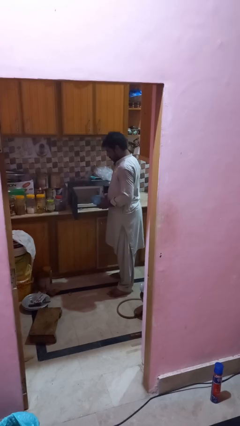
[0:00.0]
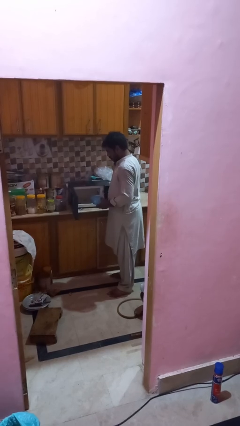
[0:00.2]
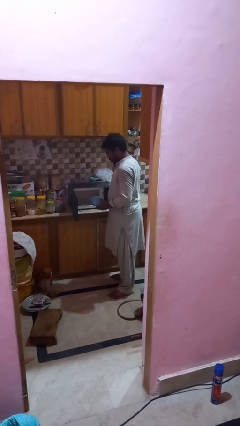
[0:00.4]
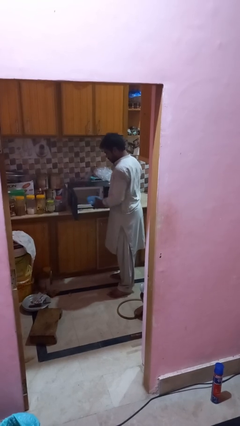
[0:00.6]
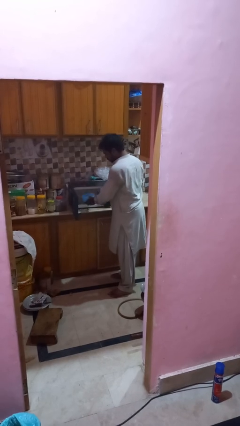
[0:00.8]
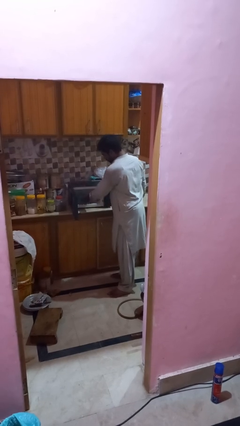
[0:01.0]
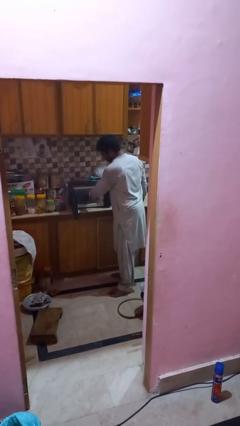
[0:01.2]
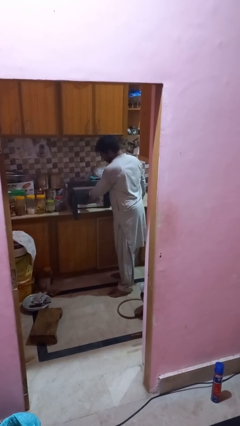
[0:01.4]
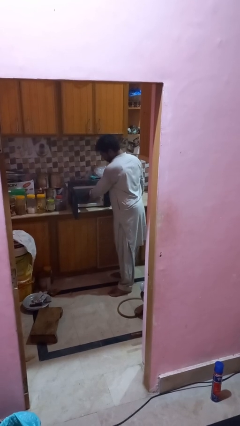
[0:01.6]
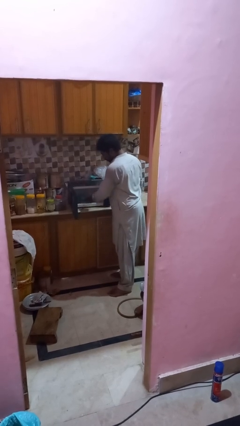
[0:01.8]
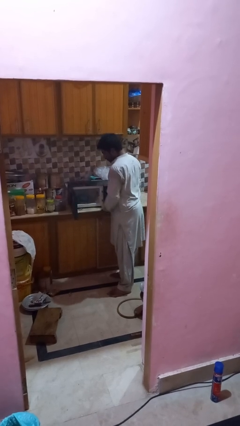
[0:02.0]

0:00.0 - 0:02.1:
person puts object into microwave

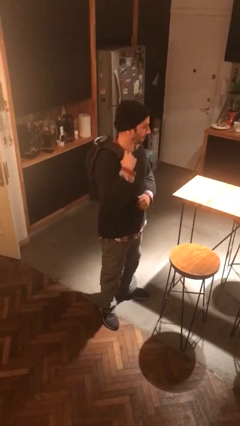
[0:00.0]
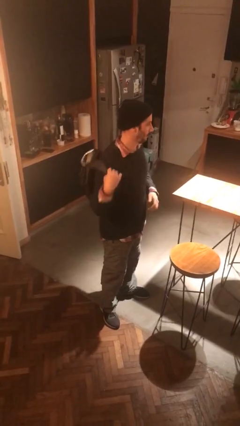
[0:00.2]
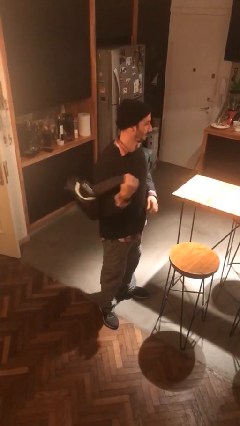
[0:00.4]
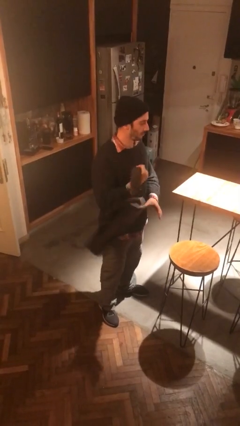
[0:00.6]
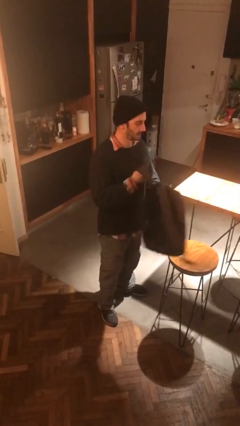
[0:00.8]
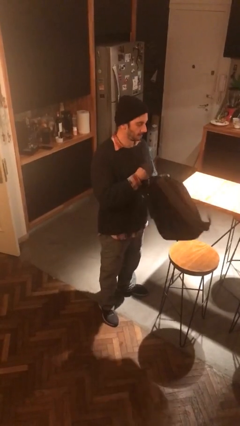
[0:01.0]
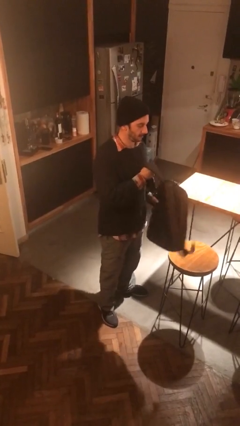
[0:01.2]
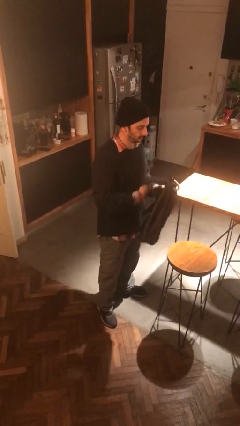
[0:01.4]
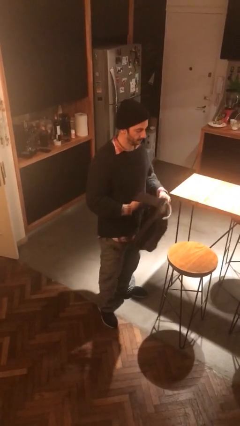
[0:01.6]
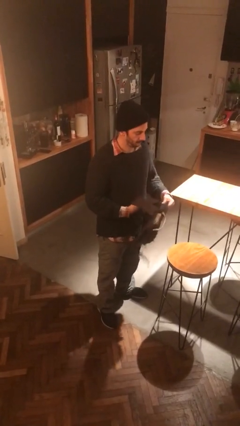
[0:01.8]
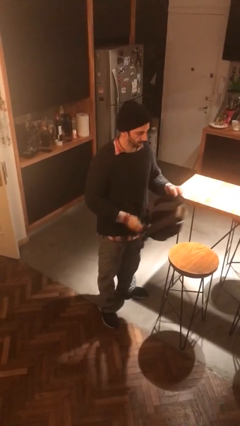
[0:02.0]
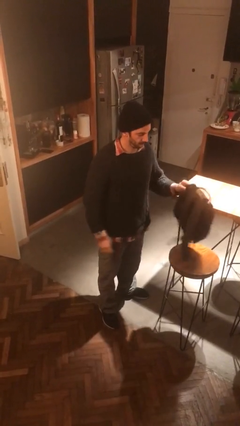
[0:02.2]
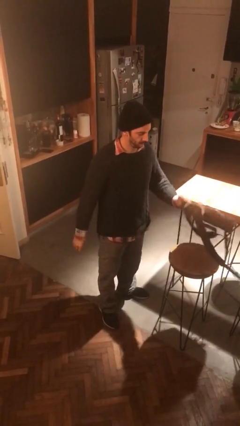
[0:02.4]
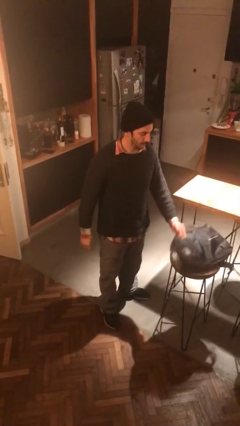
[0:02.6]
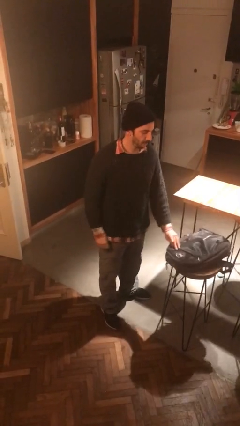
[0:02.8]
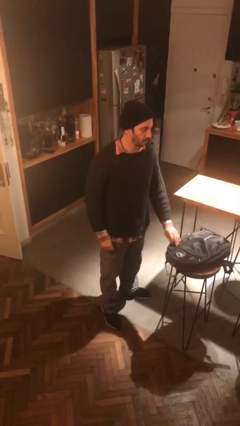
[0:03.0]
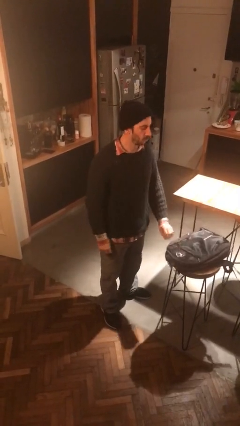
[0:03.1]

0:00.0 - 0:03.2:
person takes off backpack

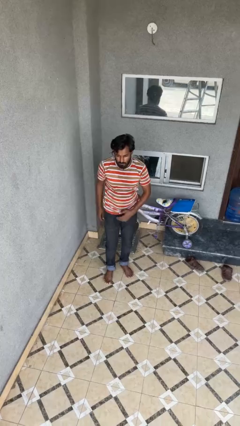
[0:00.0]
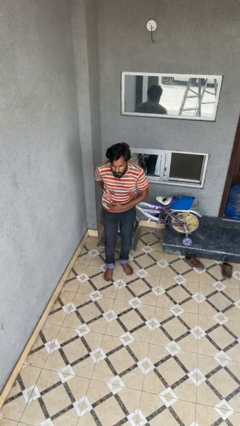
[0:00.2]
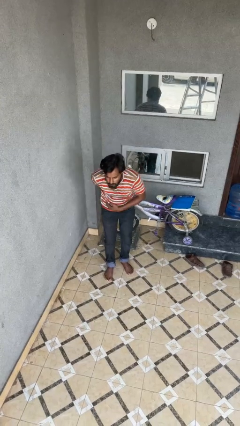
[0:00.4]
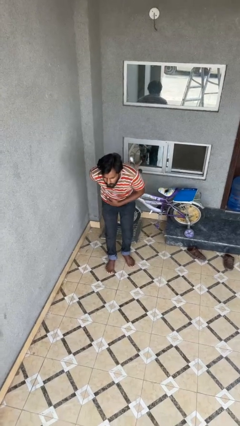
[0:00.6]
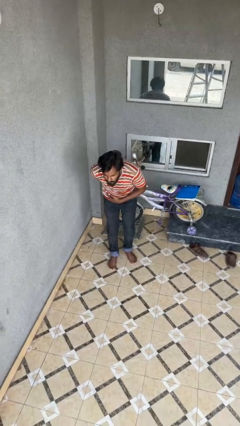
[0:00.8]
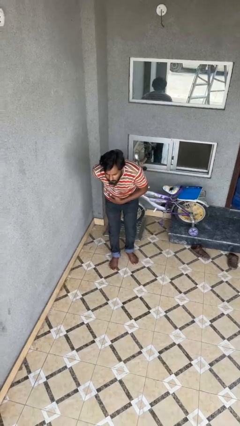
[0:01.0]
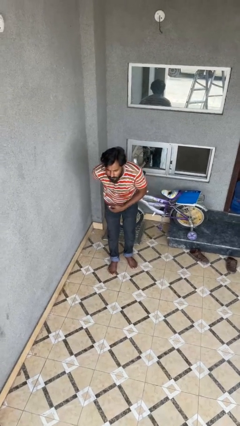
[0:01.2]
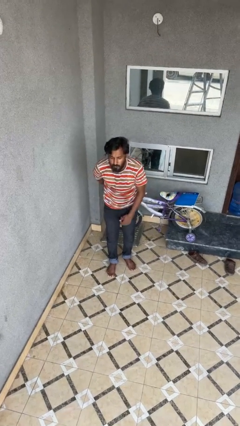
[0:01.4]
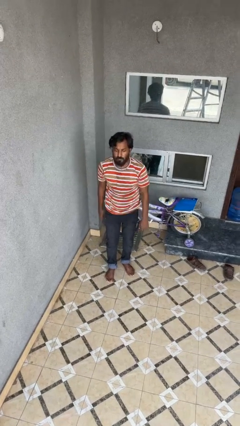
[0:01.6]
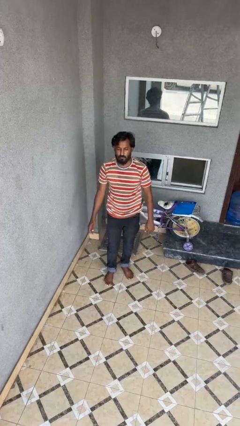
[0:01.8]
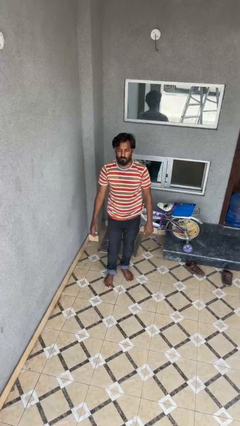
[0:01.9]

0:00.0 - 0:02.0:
person bows

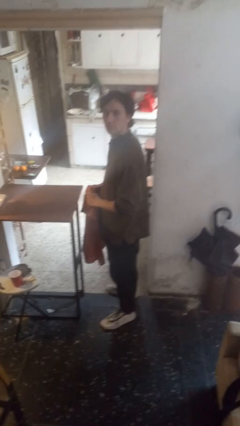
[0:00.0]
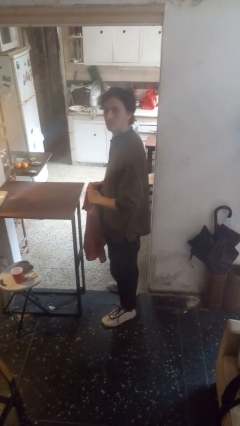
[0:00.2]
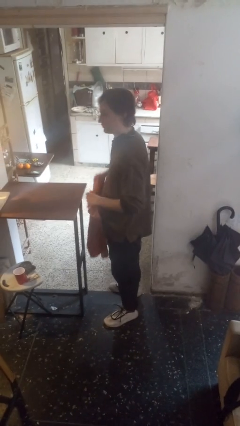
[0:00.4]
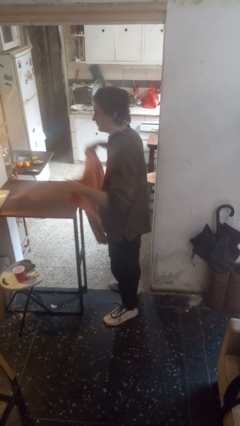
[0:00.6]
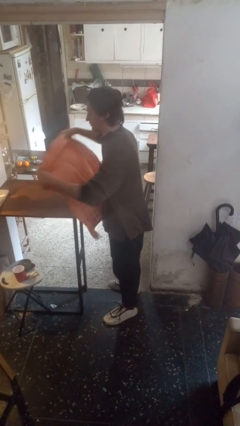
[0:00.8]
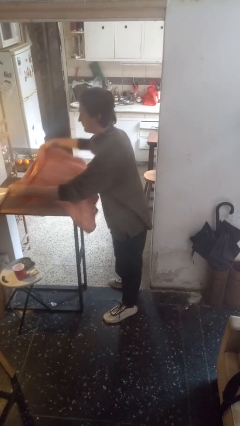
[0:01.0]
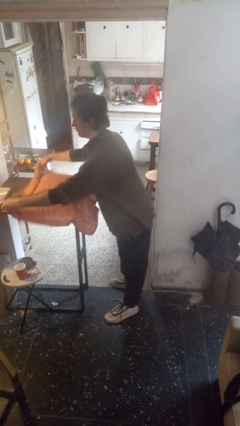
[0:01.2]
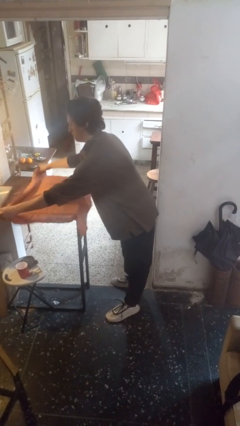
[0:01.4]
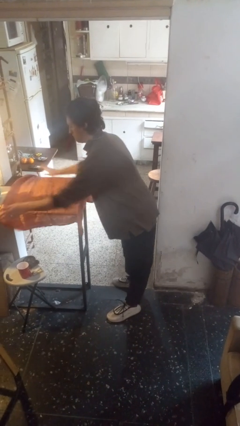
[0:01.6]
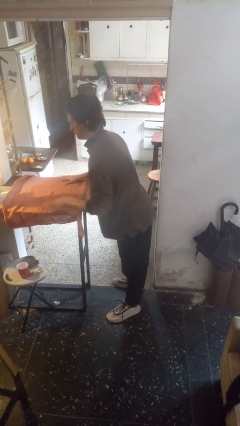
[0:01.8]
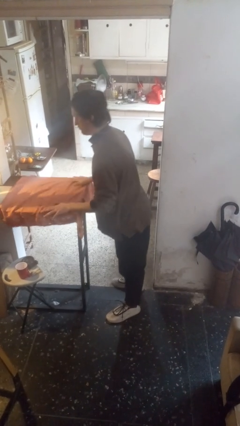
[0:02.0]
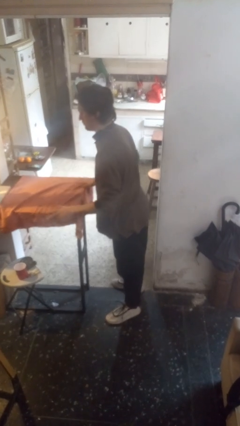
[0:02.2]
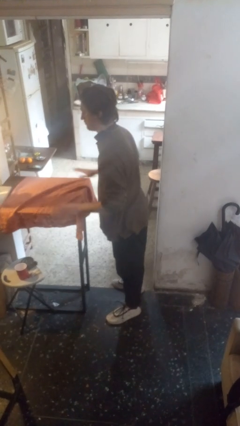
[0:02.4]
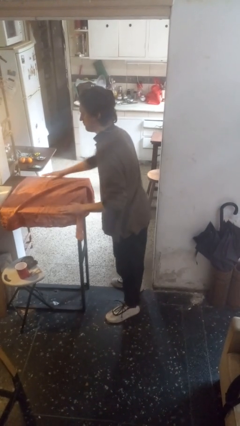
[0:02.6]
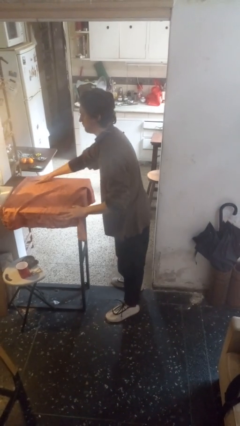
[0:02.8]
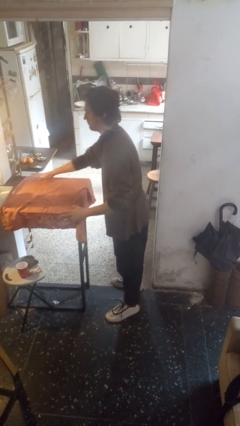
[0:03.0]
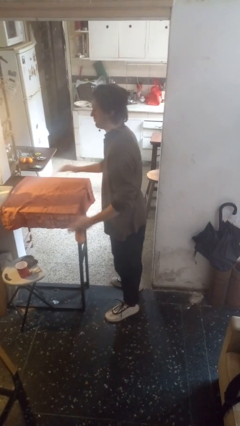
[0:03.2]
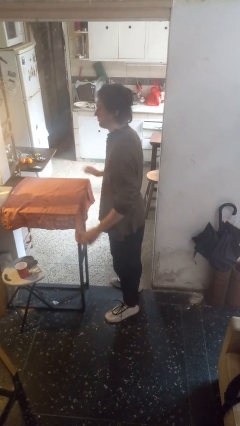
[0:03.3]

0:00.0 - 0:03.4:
person spreads tablecloth

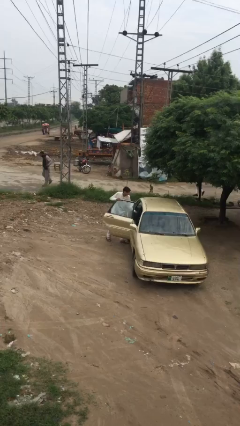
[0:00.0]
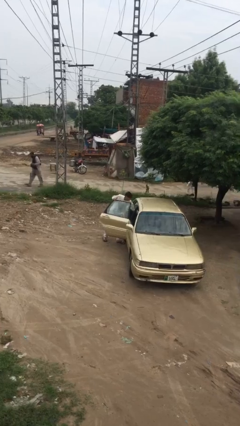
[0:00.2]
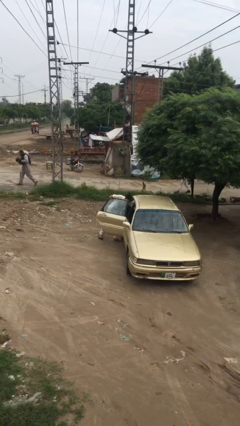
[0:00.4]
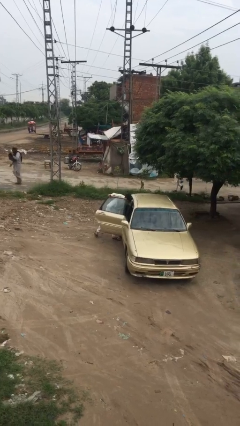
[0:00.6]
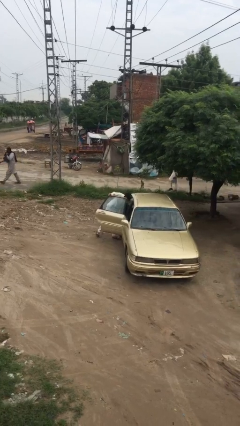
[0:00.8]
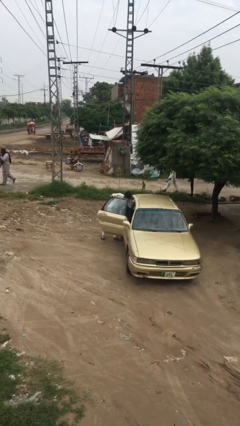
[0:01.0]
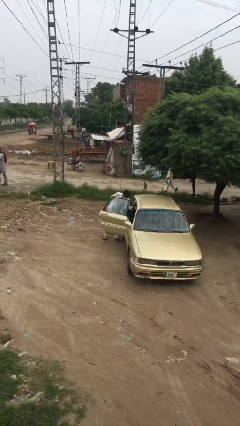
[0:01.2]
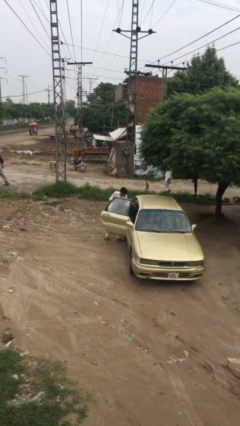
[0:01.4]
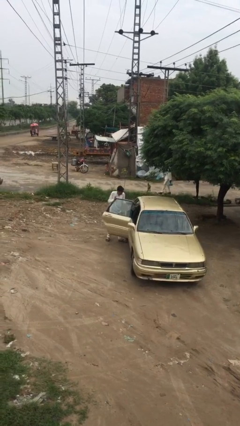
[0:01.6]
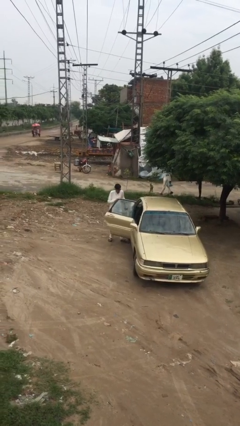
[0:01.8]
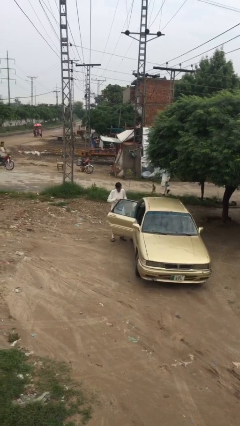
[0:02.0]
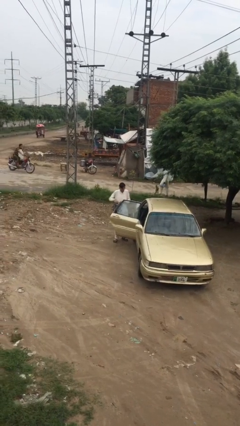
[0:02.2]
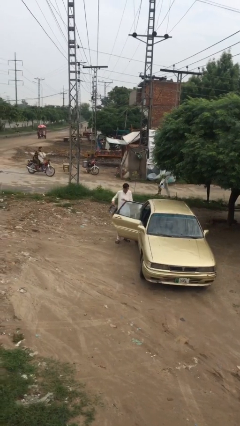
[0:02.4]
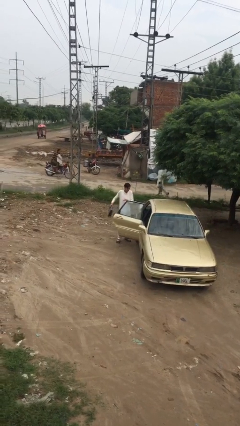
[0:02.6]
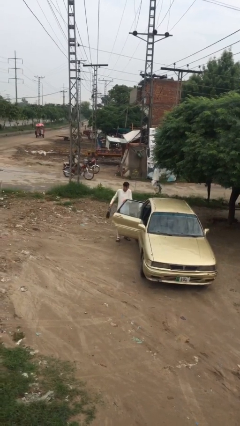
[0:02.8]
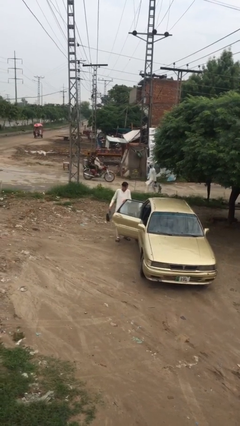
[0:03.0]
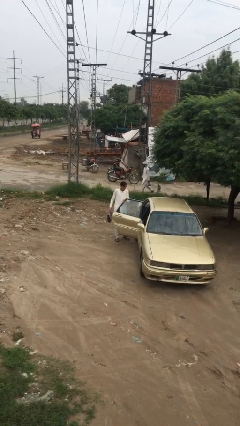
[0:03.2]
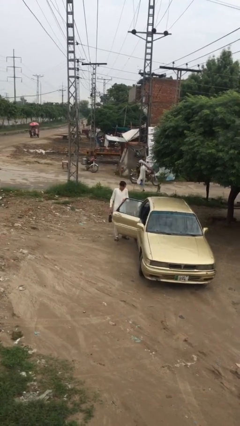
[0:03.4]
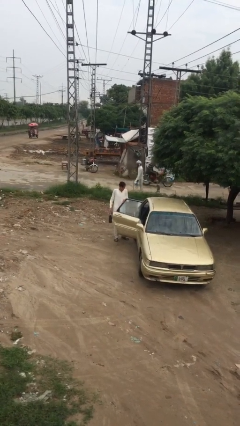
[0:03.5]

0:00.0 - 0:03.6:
person unloads car

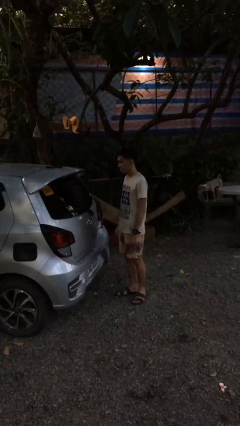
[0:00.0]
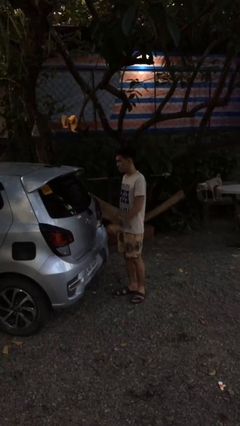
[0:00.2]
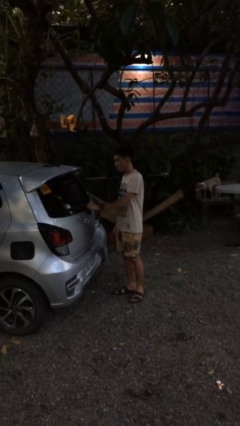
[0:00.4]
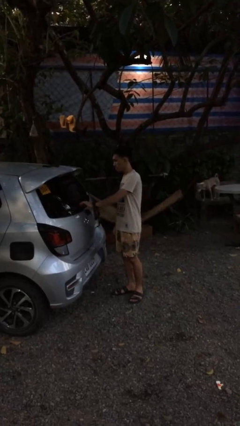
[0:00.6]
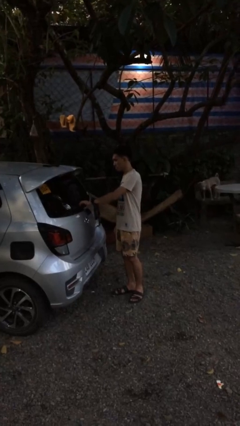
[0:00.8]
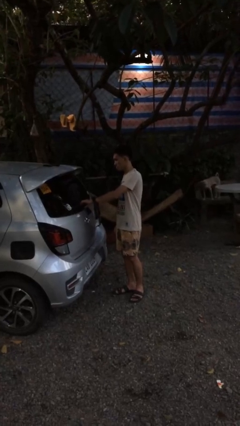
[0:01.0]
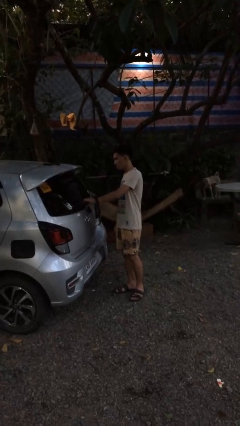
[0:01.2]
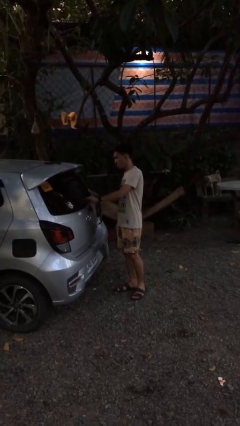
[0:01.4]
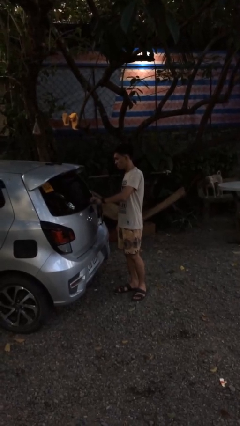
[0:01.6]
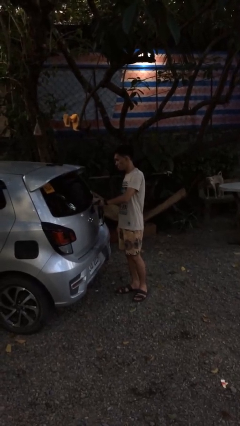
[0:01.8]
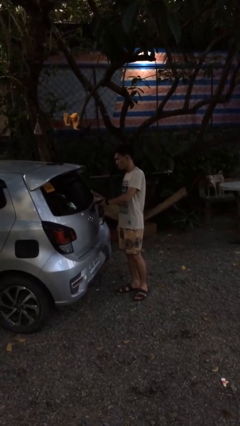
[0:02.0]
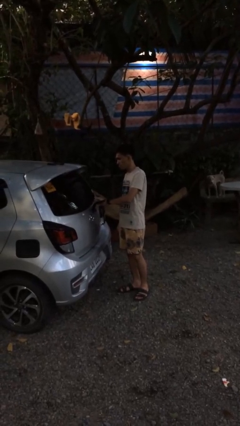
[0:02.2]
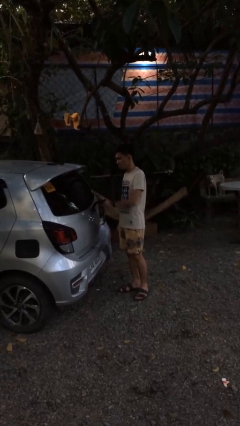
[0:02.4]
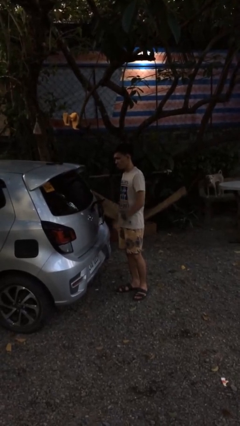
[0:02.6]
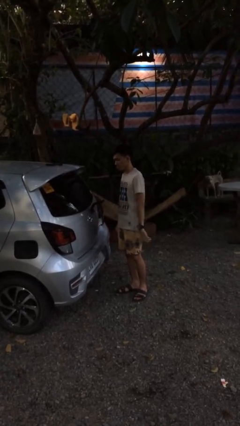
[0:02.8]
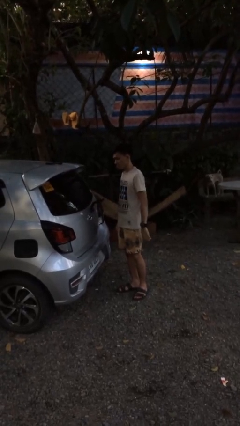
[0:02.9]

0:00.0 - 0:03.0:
person flips up car wipers

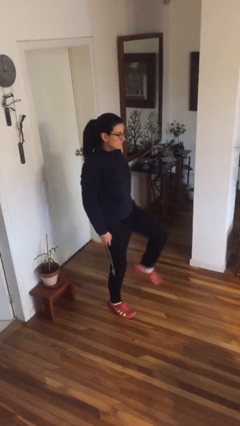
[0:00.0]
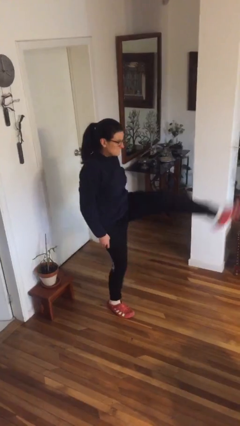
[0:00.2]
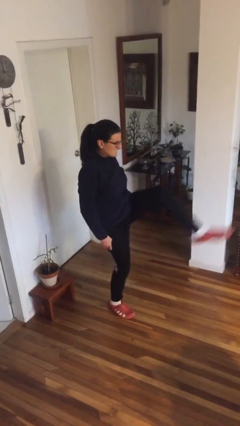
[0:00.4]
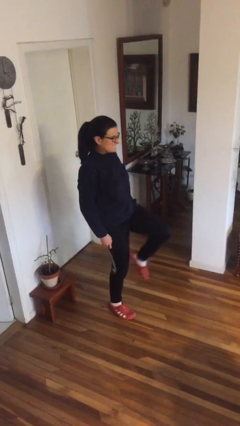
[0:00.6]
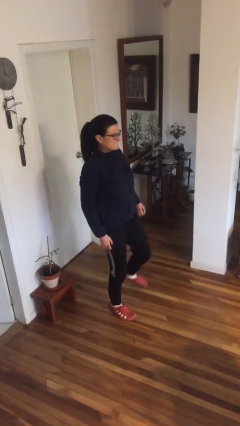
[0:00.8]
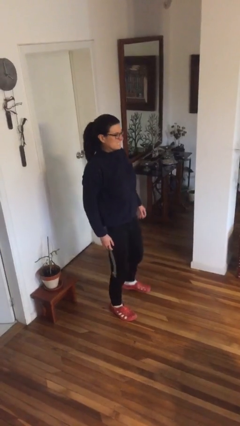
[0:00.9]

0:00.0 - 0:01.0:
person karate kicks
